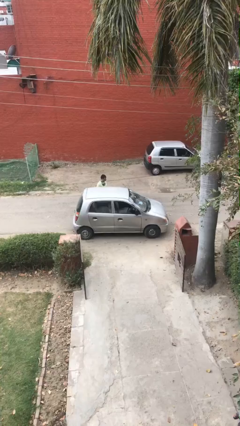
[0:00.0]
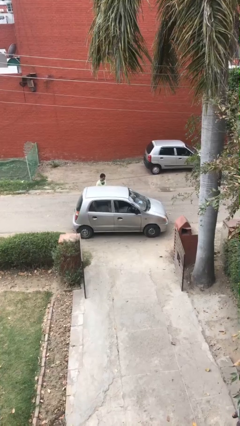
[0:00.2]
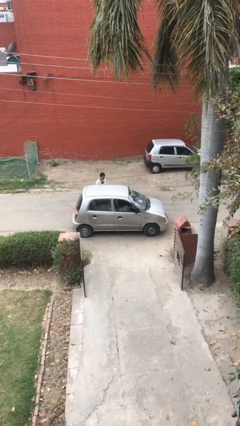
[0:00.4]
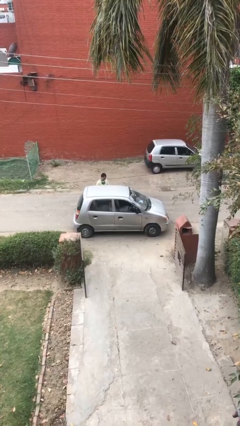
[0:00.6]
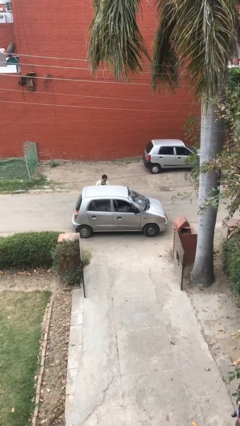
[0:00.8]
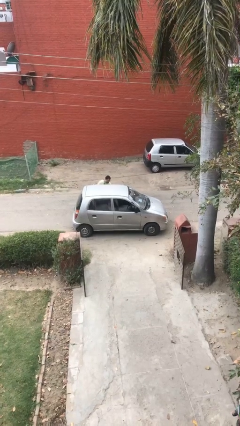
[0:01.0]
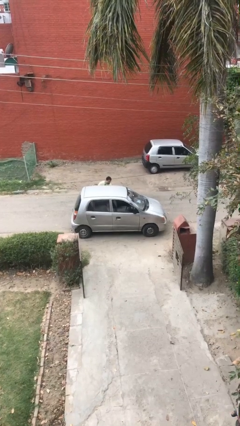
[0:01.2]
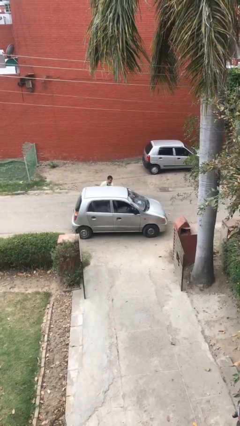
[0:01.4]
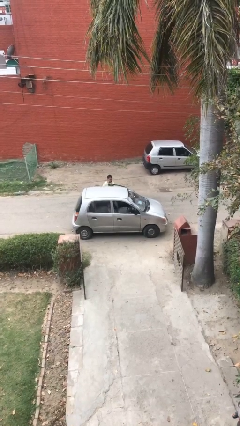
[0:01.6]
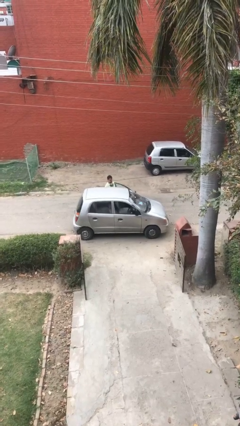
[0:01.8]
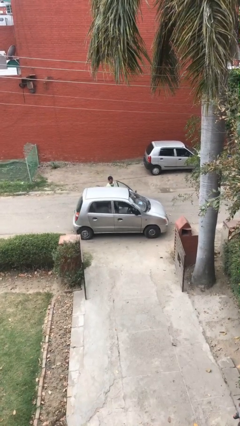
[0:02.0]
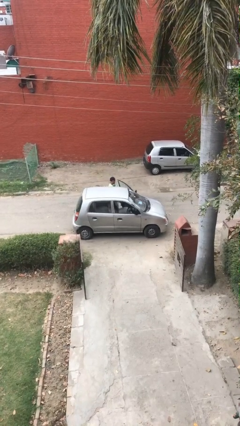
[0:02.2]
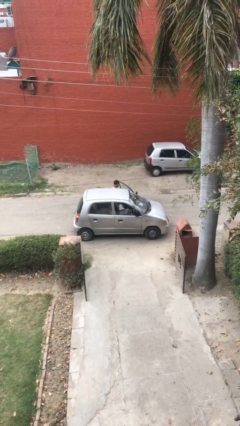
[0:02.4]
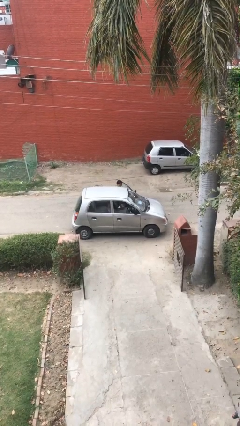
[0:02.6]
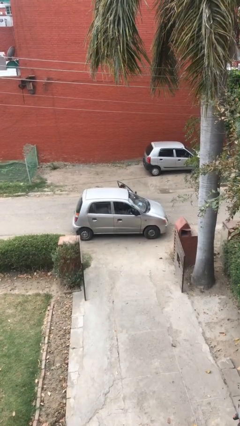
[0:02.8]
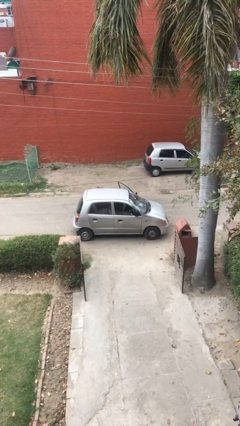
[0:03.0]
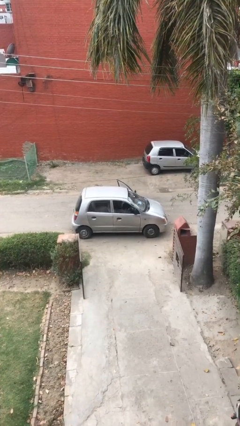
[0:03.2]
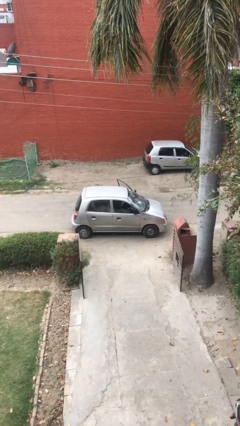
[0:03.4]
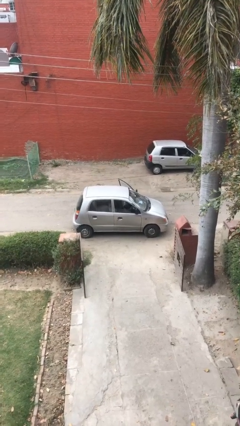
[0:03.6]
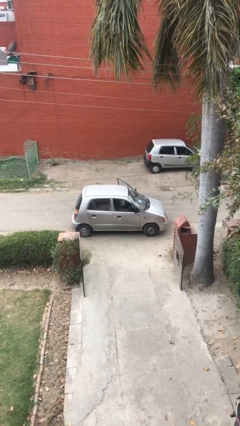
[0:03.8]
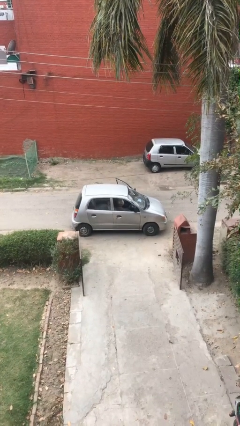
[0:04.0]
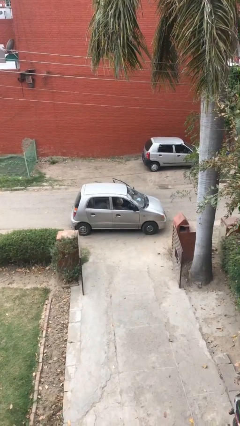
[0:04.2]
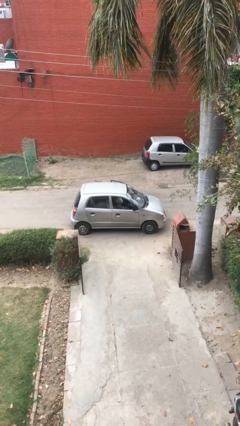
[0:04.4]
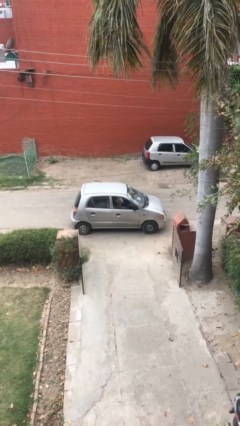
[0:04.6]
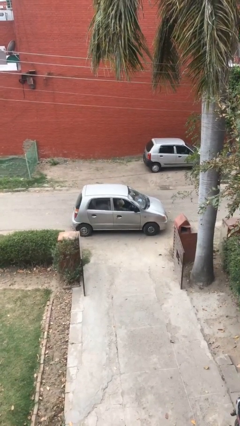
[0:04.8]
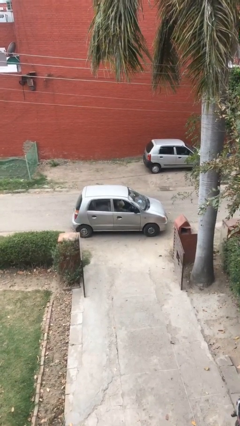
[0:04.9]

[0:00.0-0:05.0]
car picks up person

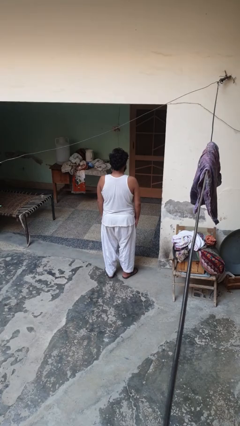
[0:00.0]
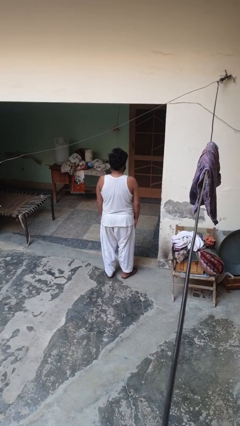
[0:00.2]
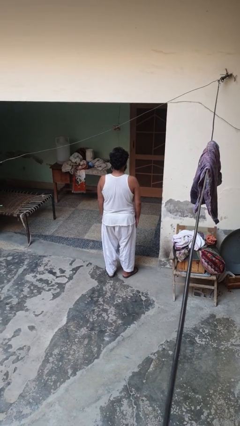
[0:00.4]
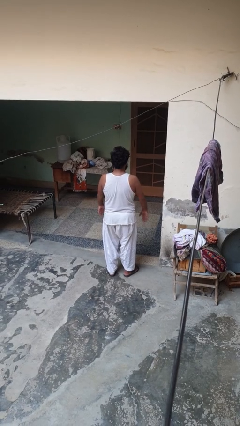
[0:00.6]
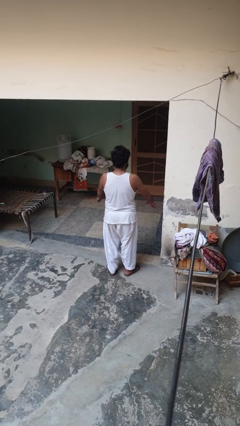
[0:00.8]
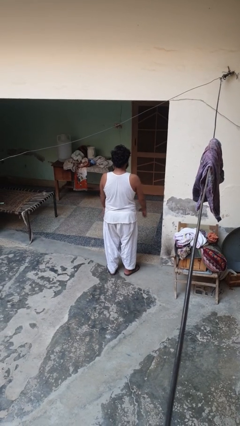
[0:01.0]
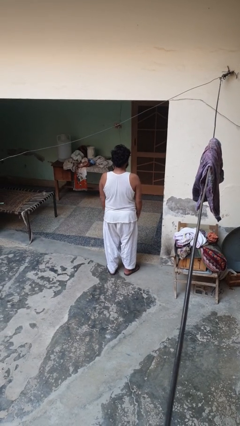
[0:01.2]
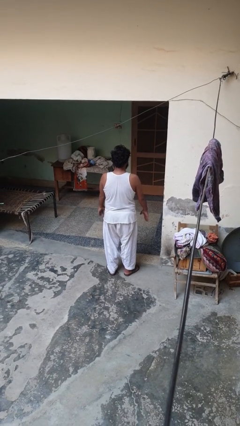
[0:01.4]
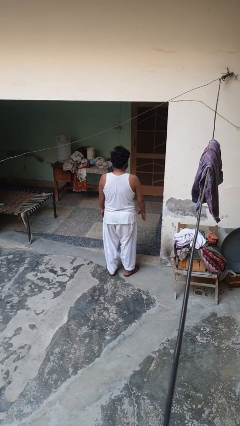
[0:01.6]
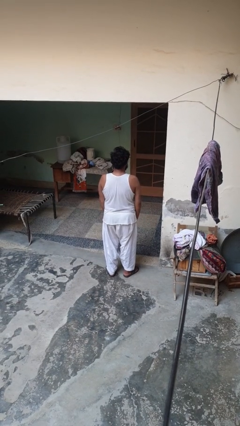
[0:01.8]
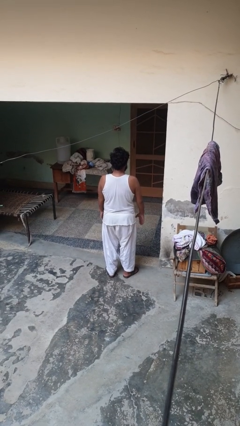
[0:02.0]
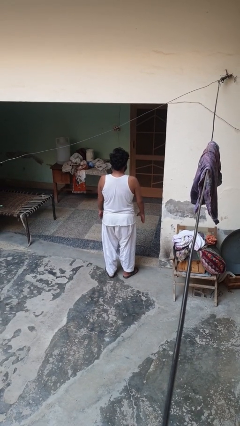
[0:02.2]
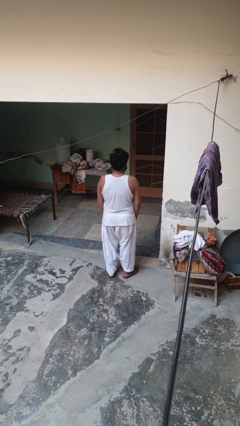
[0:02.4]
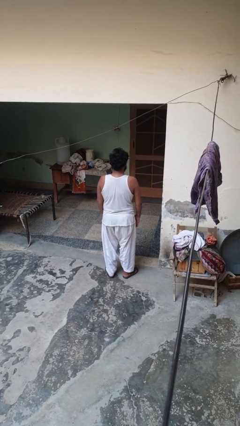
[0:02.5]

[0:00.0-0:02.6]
person slaps hands on thighs

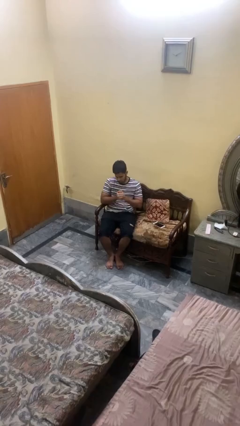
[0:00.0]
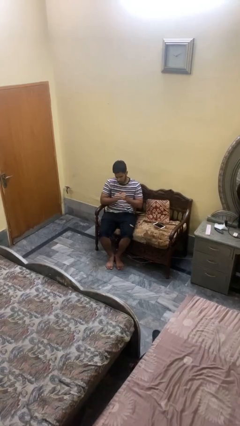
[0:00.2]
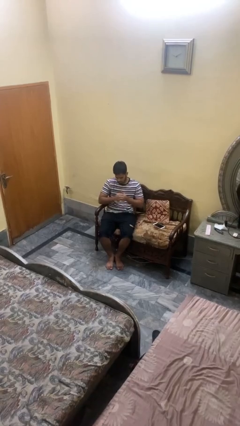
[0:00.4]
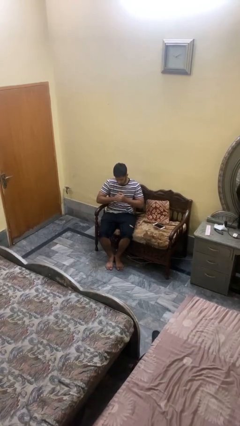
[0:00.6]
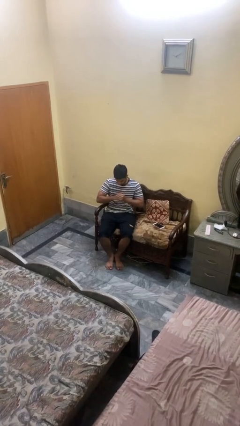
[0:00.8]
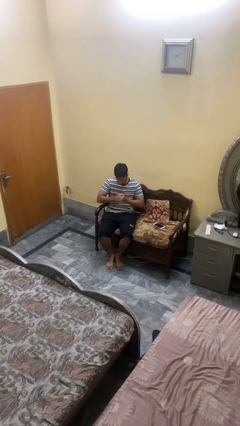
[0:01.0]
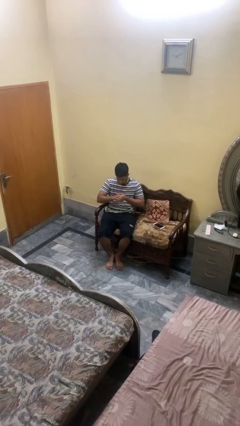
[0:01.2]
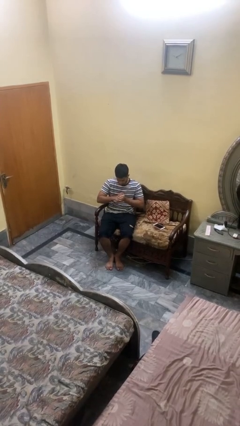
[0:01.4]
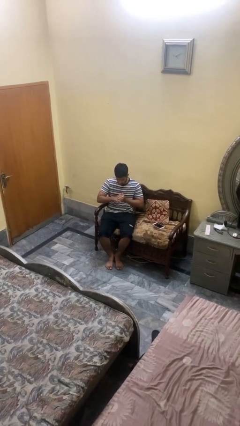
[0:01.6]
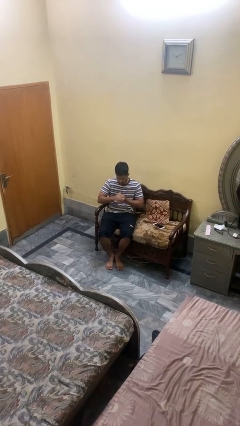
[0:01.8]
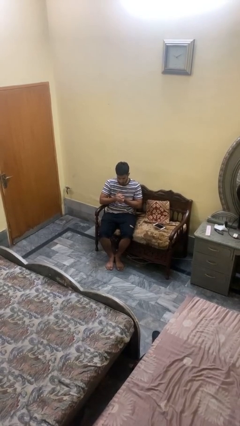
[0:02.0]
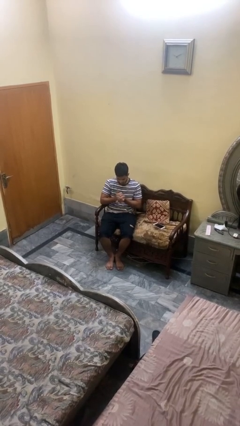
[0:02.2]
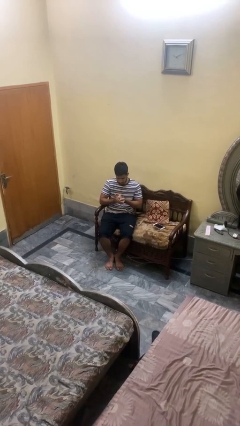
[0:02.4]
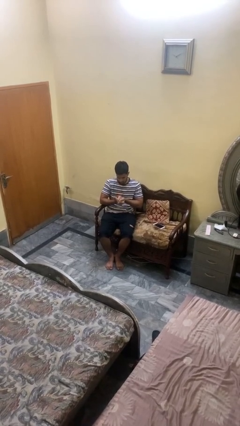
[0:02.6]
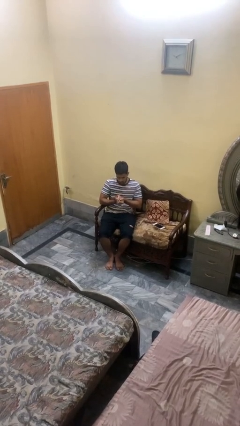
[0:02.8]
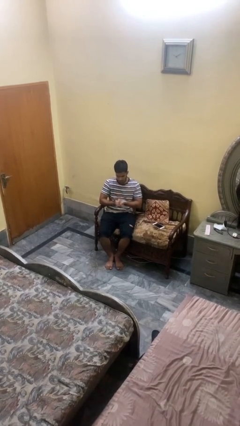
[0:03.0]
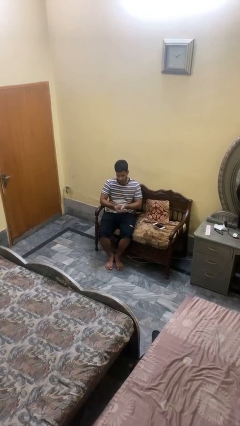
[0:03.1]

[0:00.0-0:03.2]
person cracks knuckles

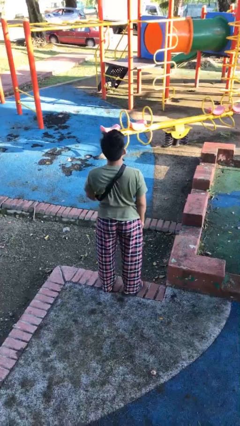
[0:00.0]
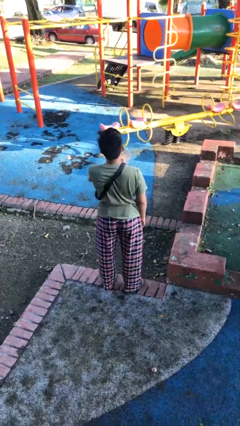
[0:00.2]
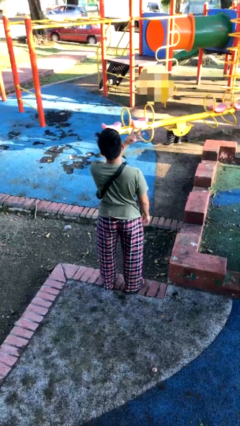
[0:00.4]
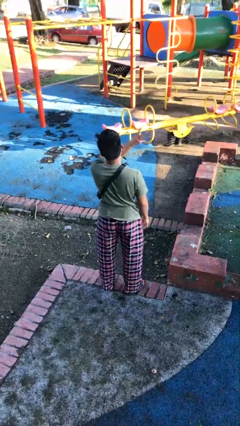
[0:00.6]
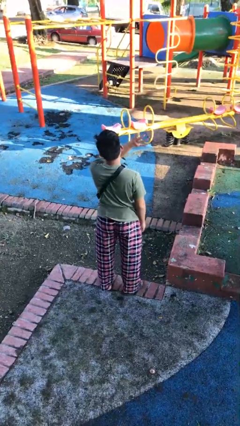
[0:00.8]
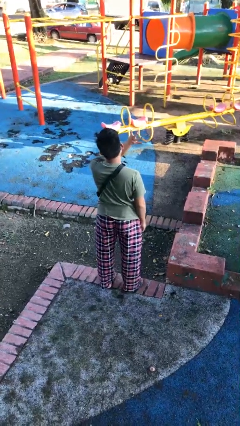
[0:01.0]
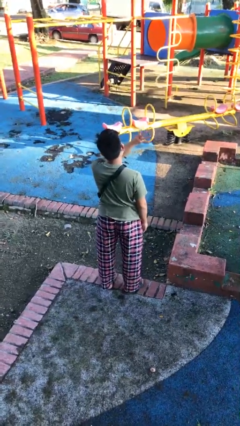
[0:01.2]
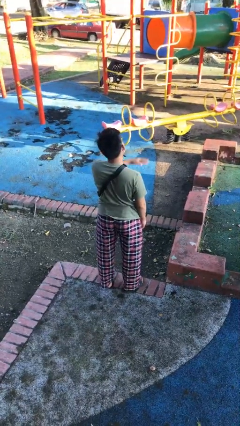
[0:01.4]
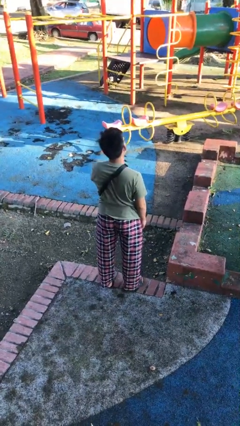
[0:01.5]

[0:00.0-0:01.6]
person gestures number four

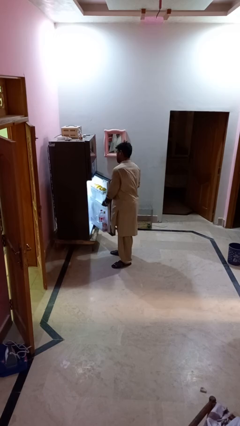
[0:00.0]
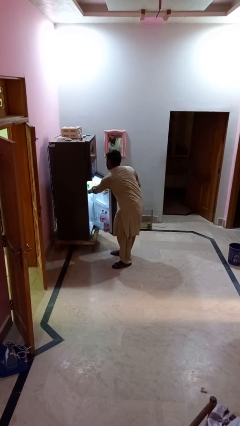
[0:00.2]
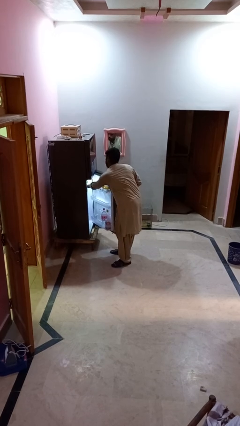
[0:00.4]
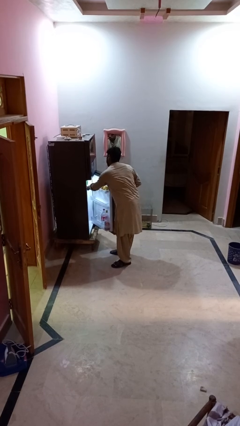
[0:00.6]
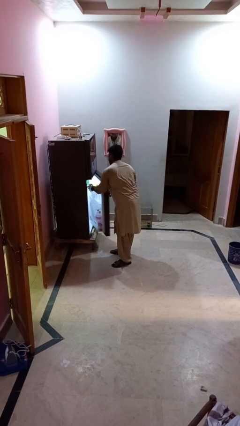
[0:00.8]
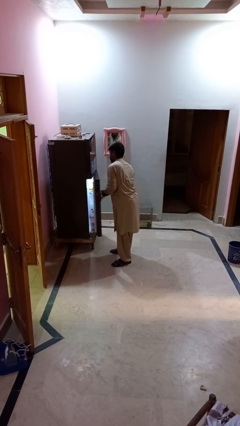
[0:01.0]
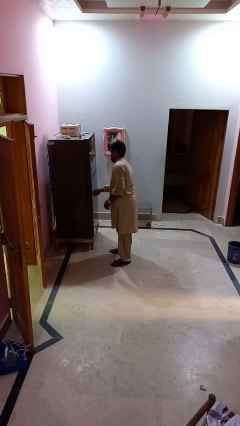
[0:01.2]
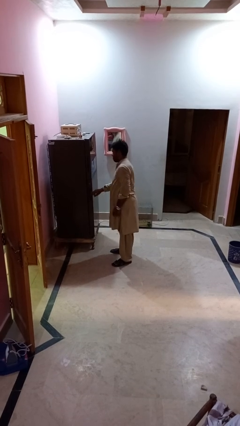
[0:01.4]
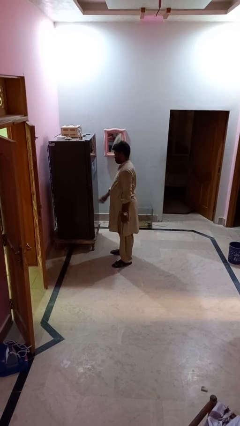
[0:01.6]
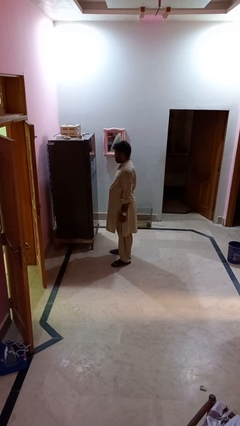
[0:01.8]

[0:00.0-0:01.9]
person closes refrigerator

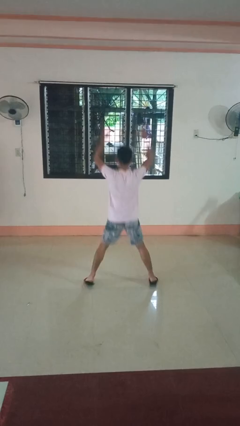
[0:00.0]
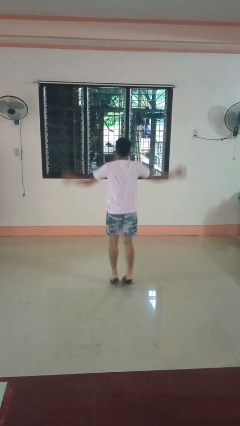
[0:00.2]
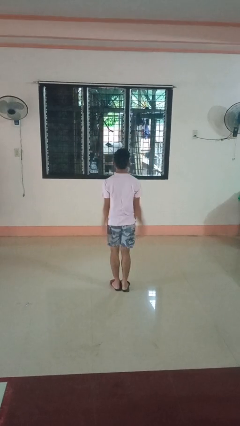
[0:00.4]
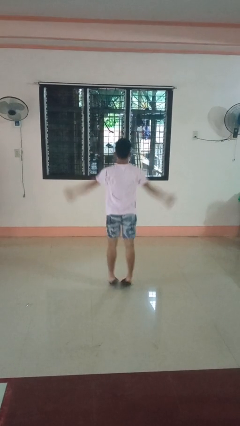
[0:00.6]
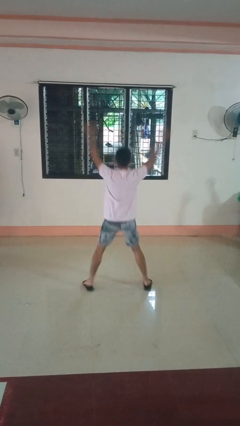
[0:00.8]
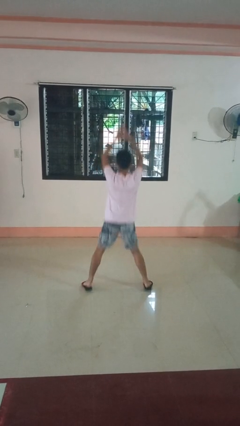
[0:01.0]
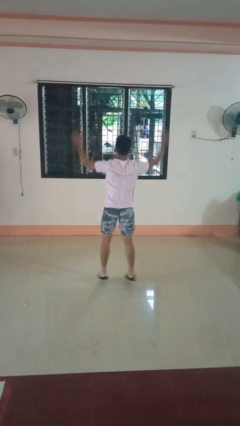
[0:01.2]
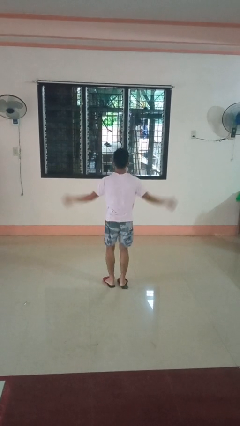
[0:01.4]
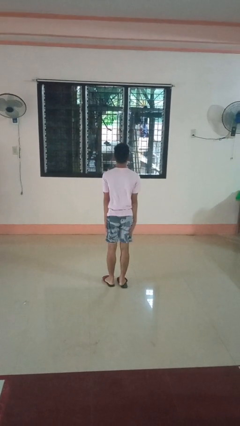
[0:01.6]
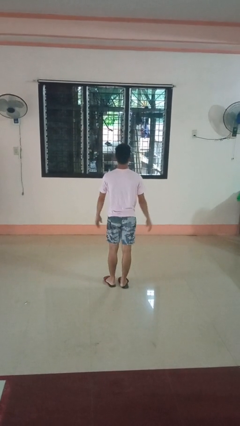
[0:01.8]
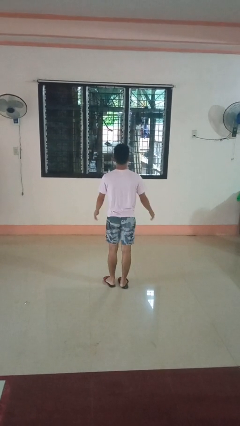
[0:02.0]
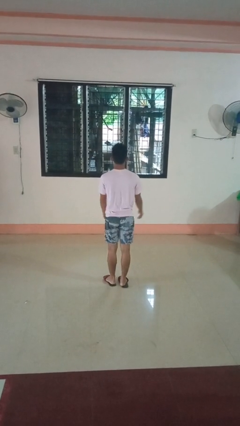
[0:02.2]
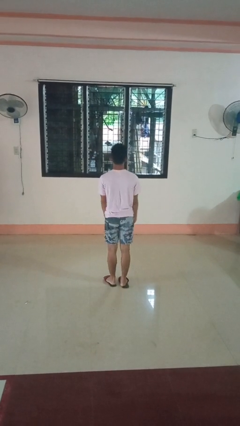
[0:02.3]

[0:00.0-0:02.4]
person exercises with jumping jacks
